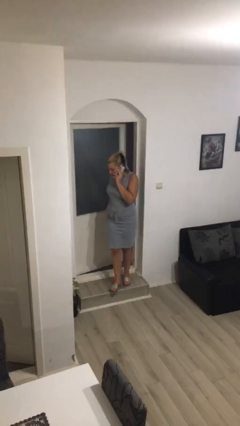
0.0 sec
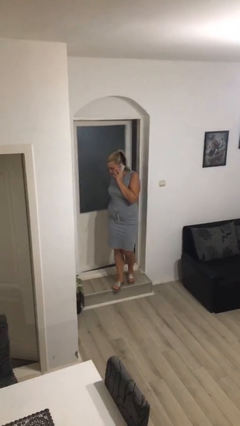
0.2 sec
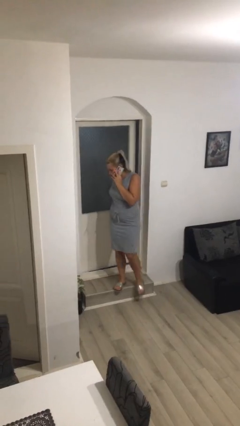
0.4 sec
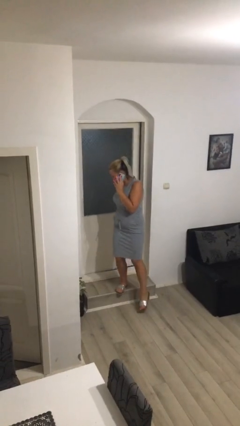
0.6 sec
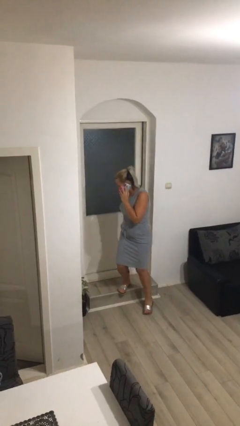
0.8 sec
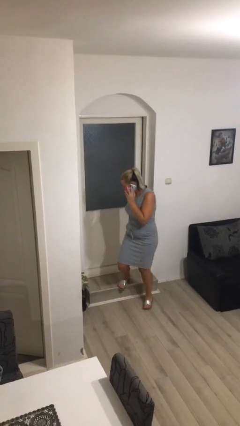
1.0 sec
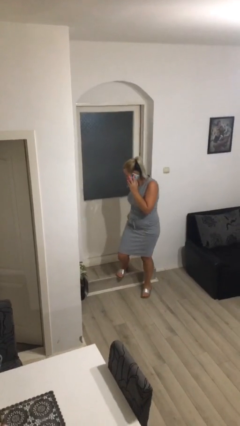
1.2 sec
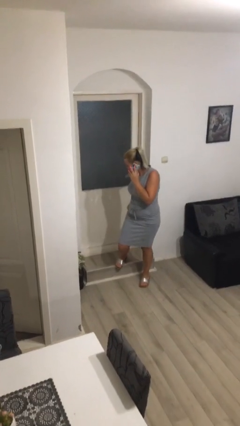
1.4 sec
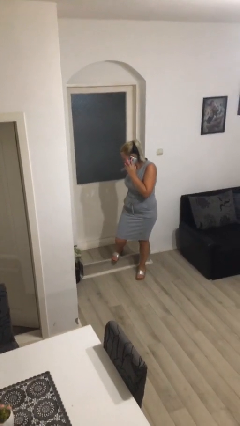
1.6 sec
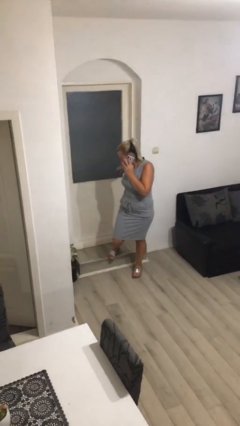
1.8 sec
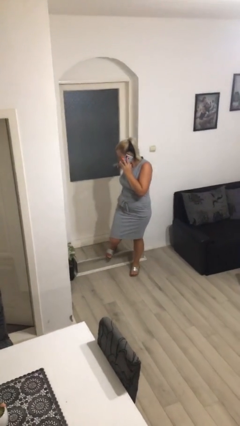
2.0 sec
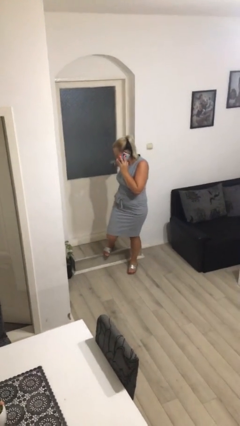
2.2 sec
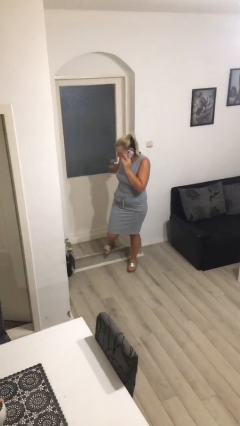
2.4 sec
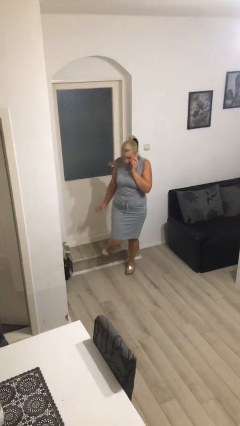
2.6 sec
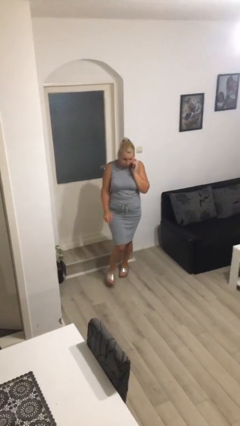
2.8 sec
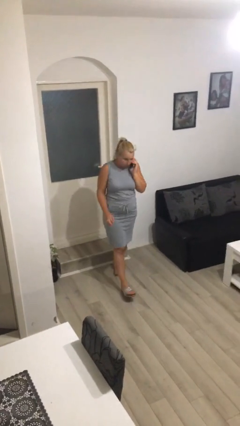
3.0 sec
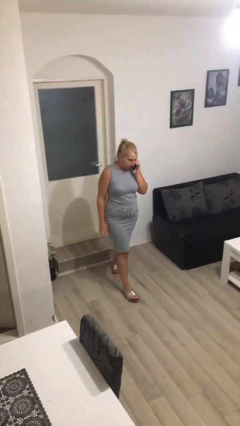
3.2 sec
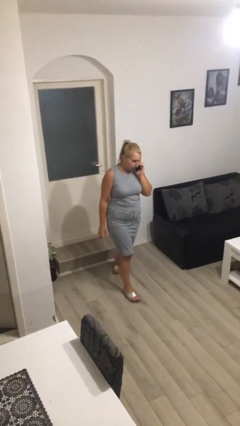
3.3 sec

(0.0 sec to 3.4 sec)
person closes facility door

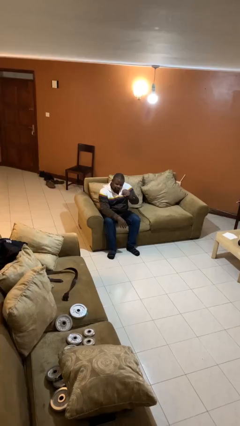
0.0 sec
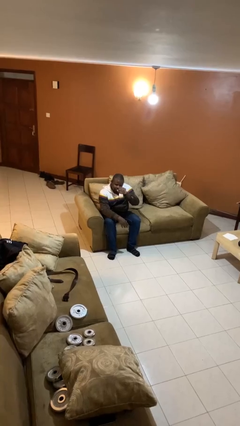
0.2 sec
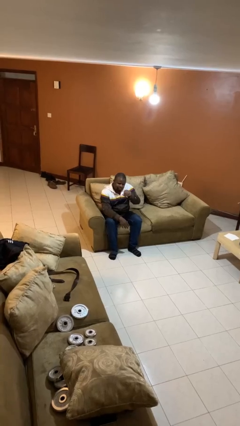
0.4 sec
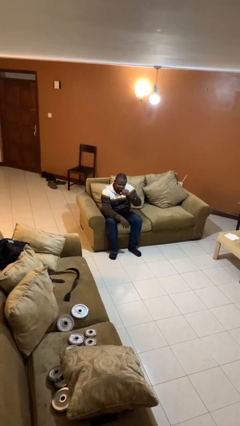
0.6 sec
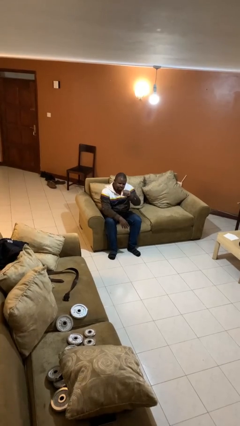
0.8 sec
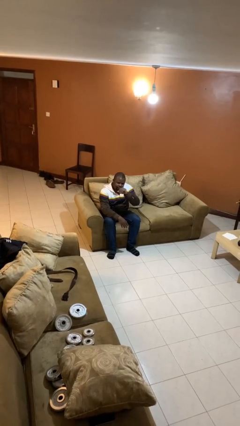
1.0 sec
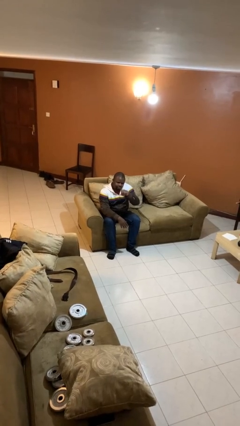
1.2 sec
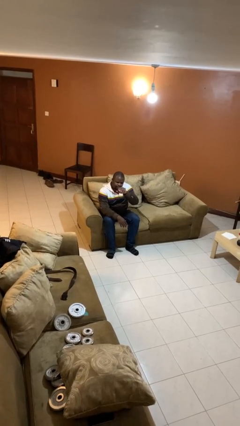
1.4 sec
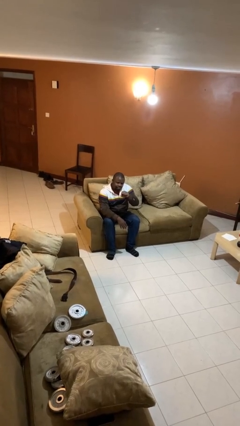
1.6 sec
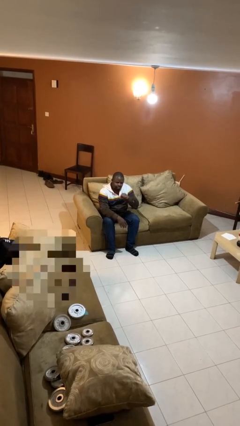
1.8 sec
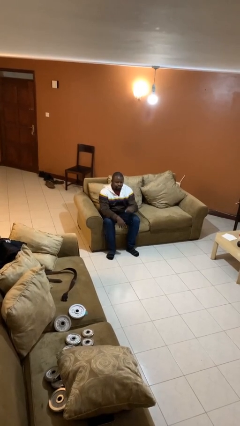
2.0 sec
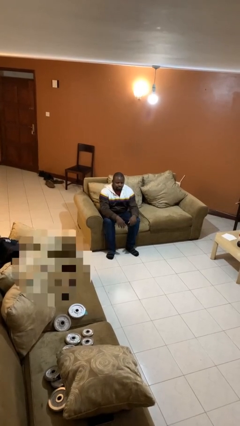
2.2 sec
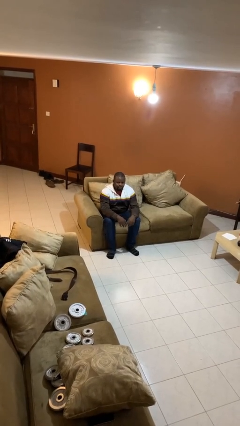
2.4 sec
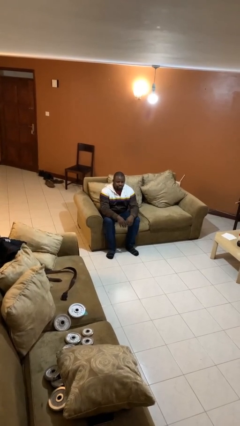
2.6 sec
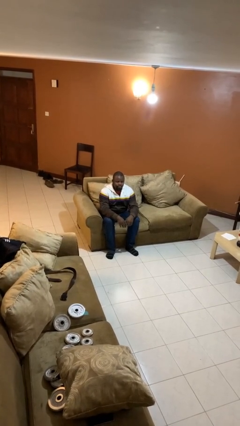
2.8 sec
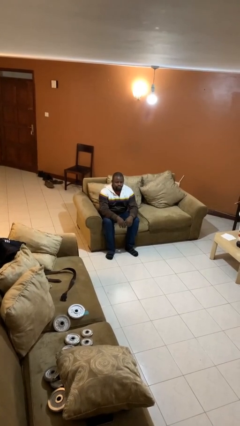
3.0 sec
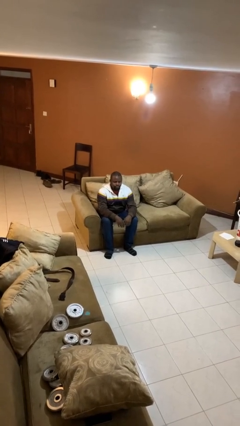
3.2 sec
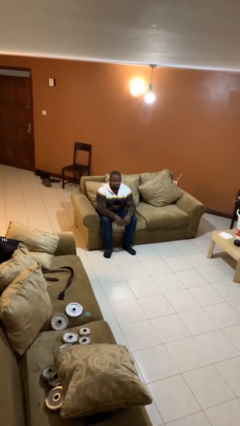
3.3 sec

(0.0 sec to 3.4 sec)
person gestures come here

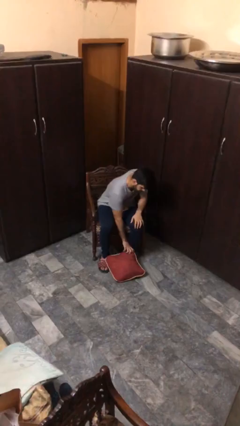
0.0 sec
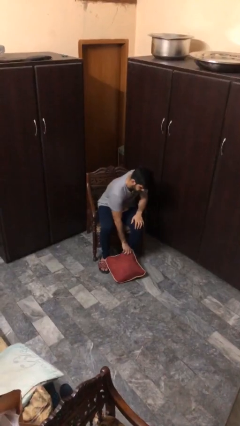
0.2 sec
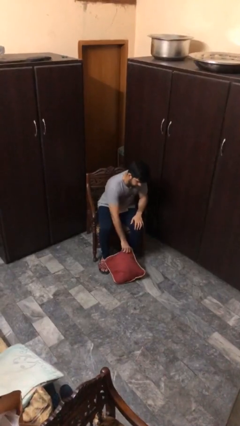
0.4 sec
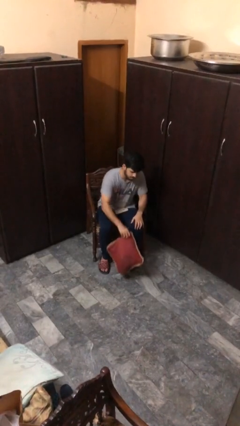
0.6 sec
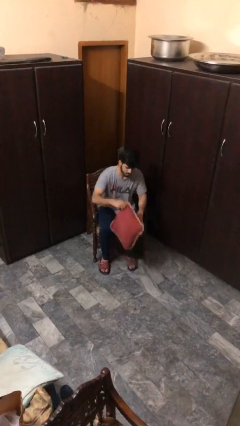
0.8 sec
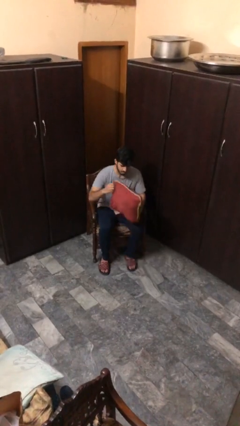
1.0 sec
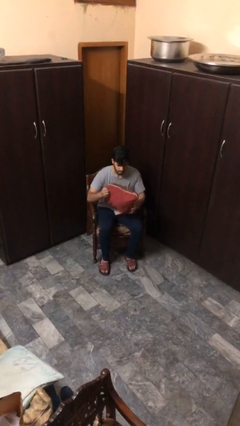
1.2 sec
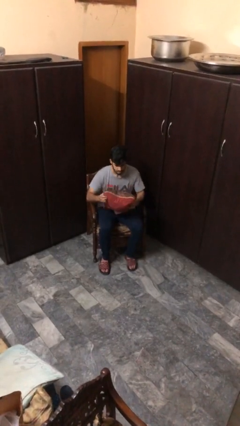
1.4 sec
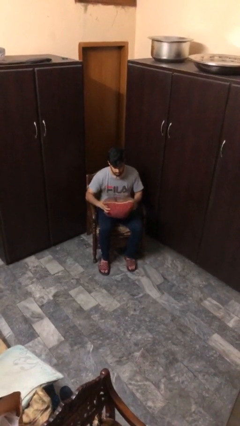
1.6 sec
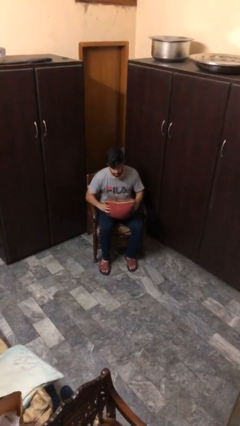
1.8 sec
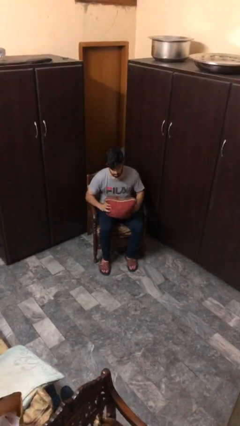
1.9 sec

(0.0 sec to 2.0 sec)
person picks up object from floor

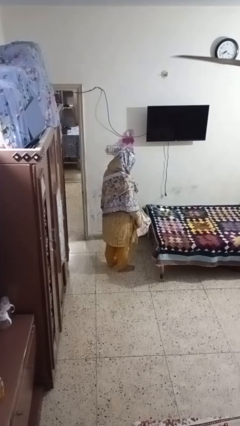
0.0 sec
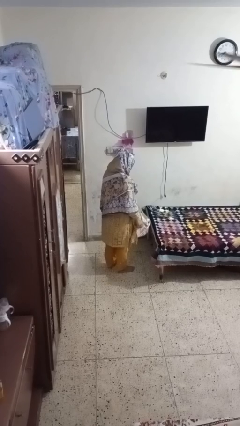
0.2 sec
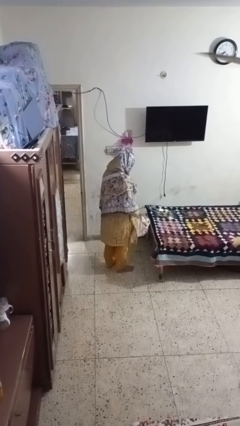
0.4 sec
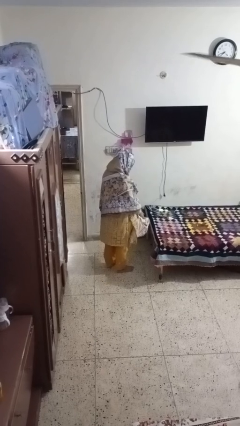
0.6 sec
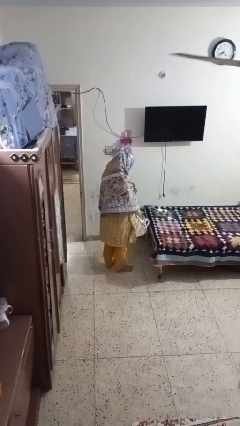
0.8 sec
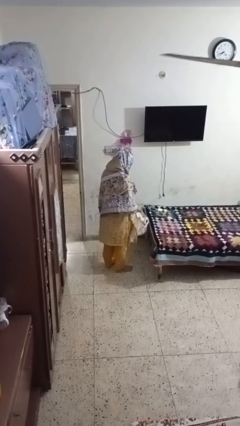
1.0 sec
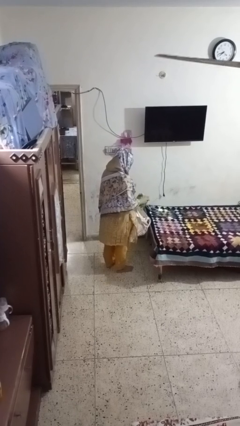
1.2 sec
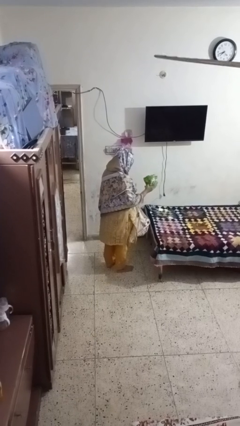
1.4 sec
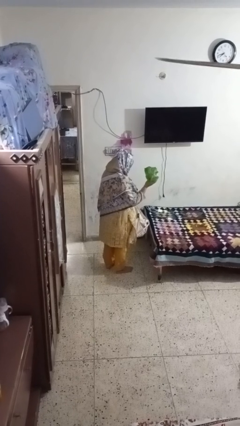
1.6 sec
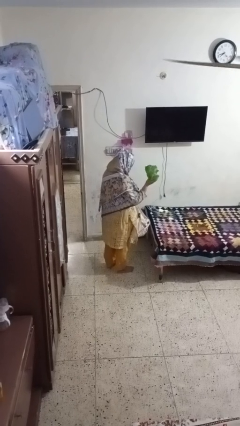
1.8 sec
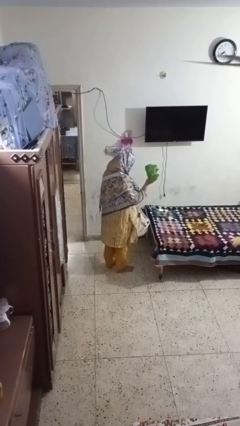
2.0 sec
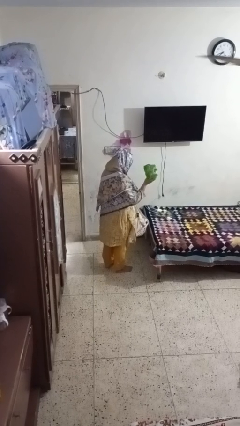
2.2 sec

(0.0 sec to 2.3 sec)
person takes object from bag

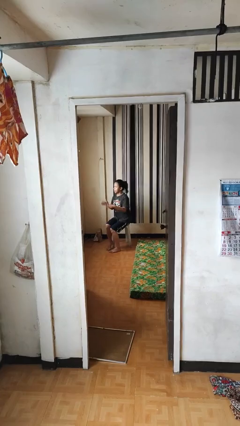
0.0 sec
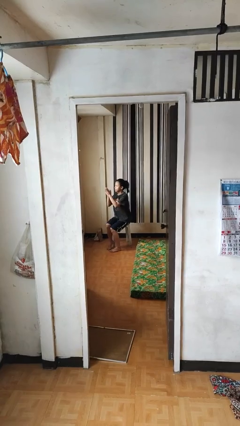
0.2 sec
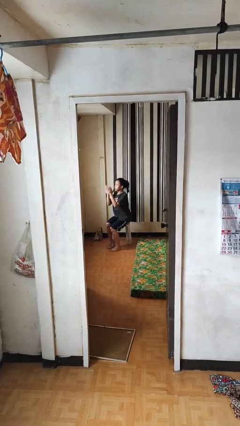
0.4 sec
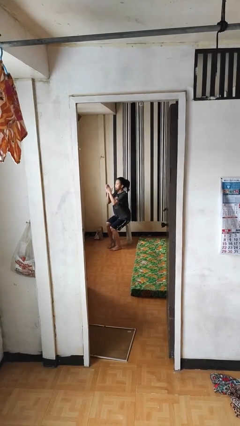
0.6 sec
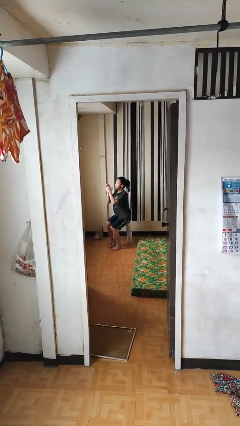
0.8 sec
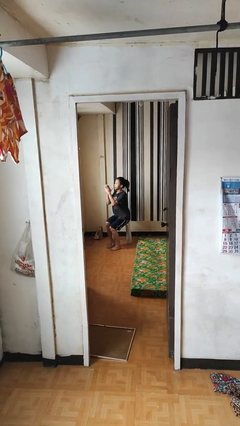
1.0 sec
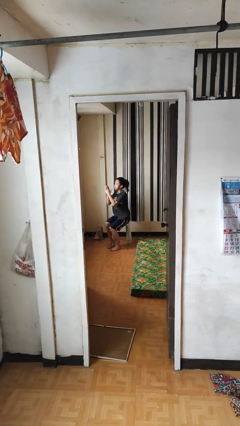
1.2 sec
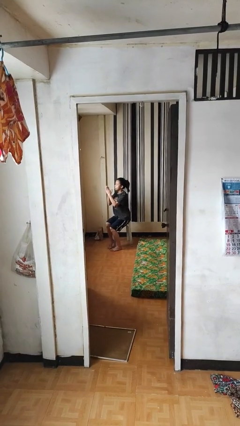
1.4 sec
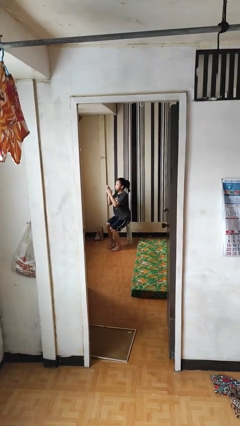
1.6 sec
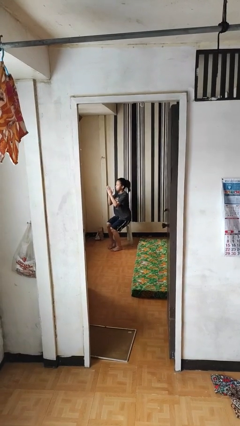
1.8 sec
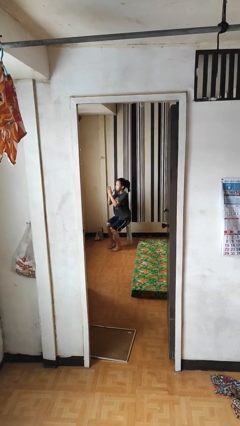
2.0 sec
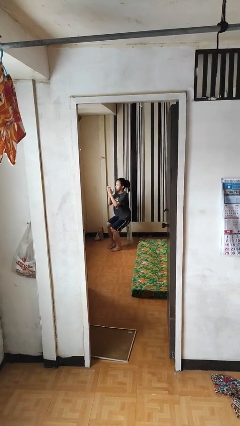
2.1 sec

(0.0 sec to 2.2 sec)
person claps hands

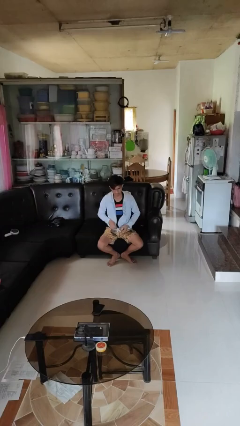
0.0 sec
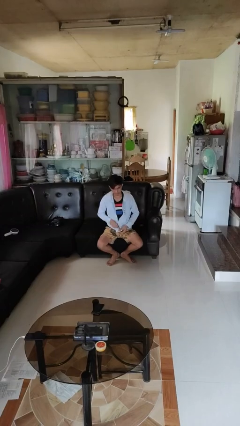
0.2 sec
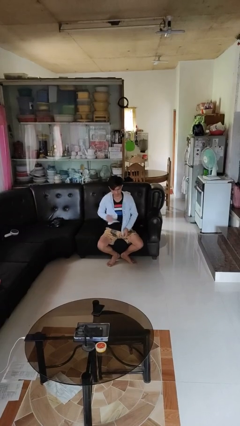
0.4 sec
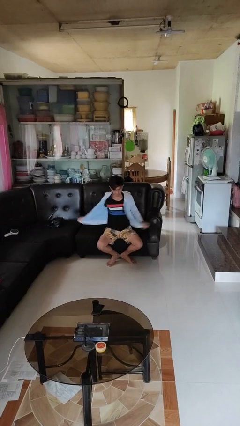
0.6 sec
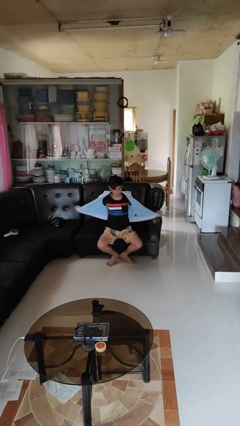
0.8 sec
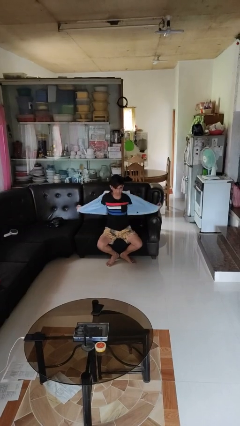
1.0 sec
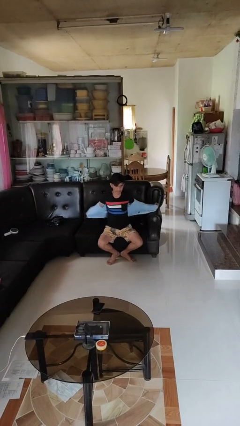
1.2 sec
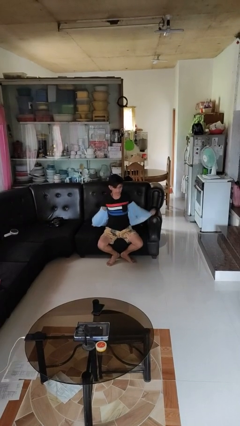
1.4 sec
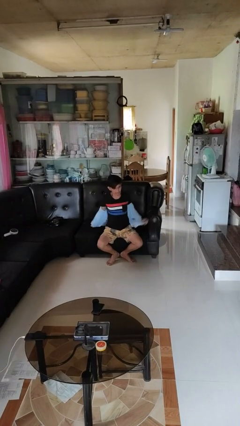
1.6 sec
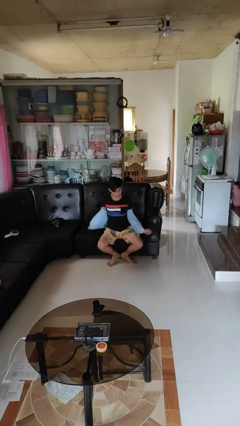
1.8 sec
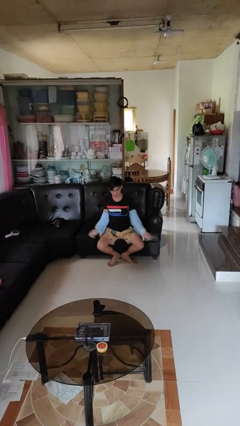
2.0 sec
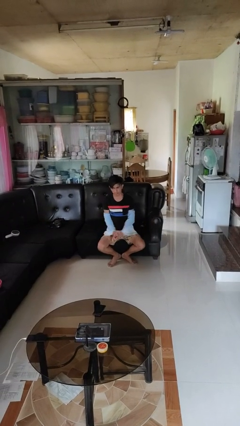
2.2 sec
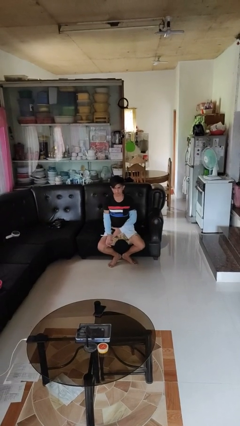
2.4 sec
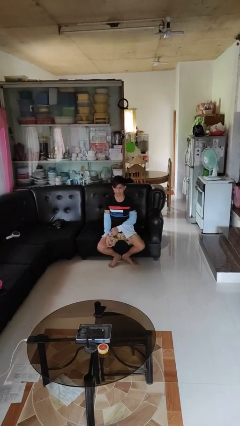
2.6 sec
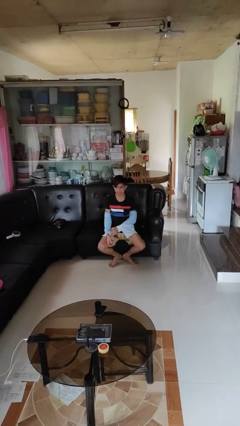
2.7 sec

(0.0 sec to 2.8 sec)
person takes off jacket

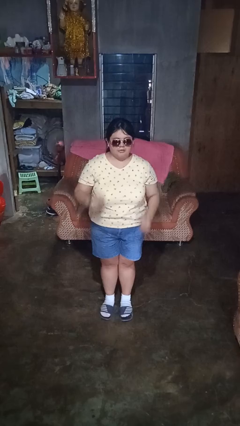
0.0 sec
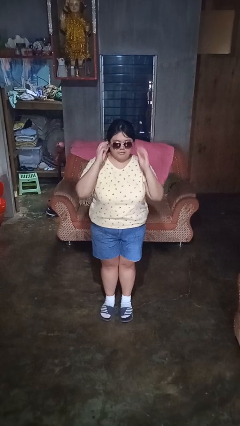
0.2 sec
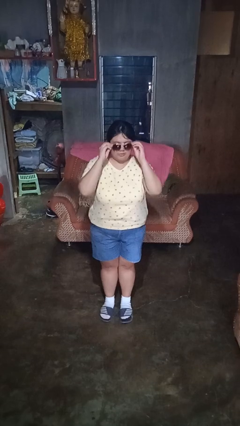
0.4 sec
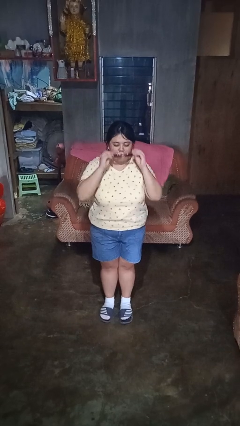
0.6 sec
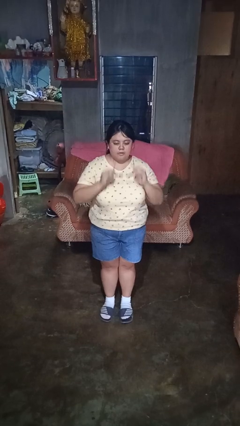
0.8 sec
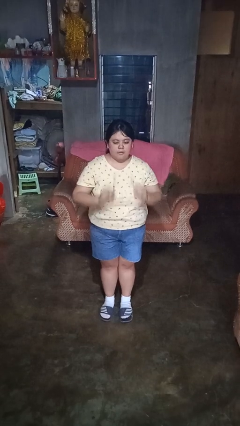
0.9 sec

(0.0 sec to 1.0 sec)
person takes off sunglasses
